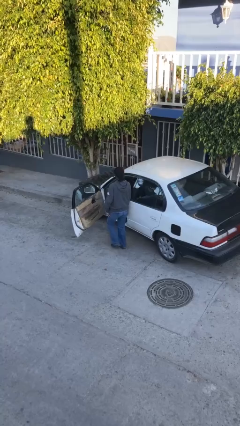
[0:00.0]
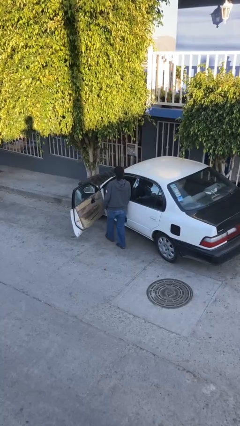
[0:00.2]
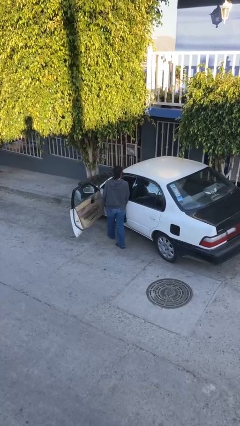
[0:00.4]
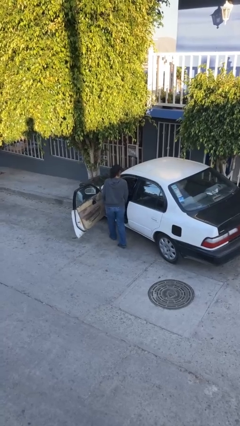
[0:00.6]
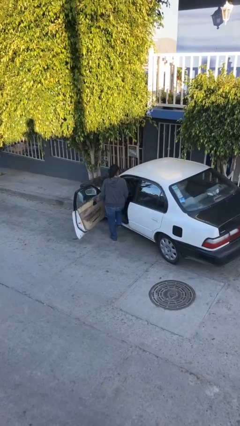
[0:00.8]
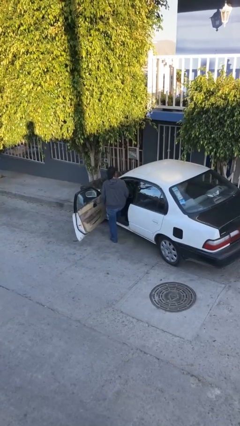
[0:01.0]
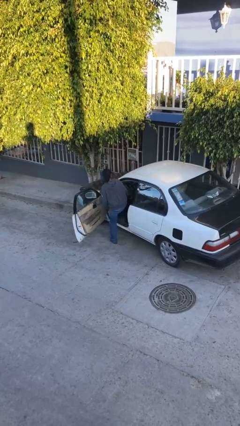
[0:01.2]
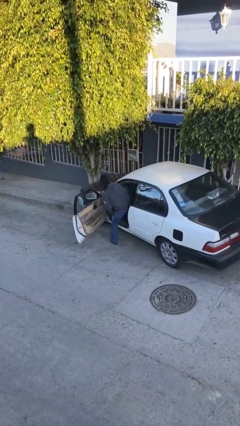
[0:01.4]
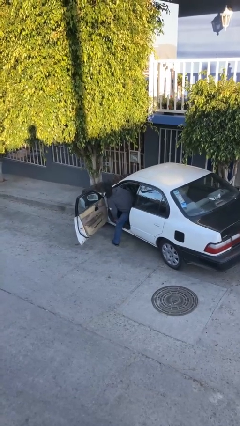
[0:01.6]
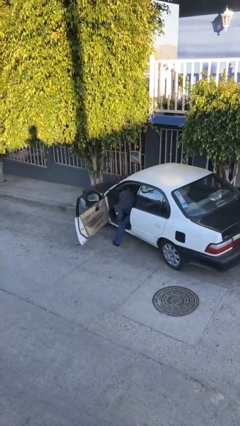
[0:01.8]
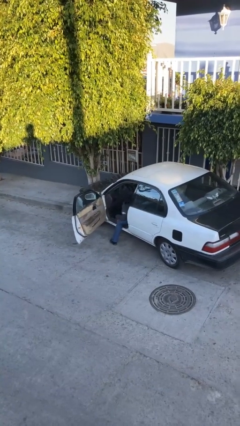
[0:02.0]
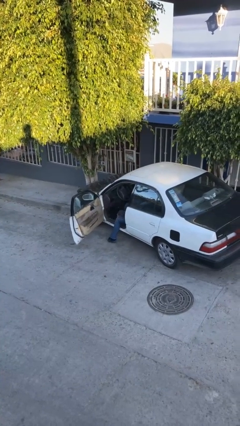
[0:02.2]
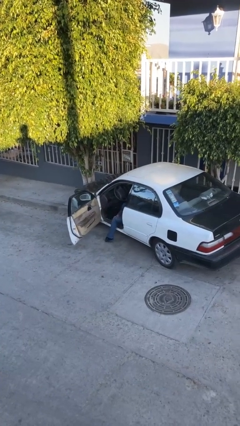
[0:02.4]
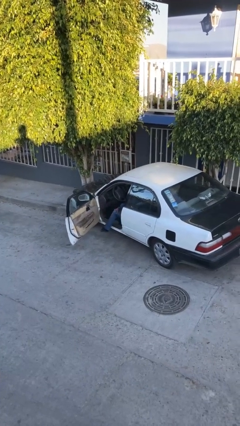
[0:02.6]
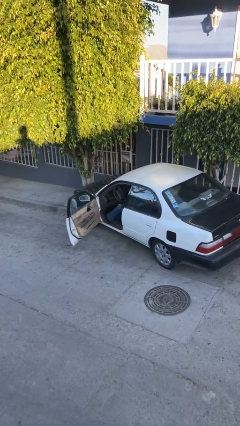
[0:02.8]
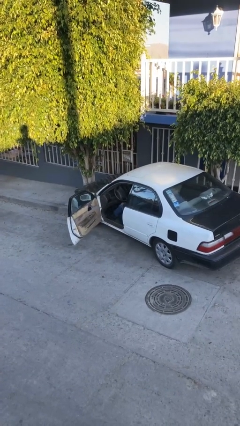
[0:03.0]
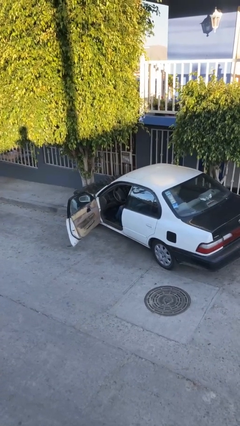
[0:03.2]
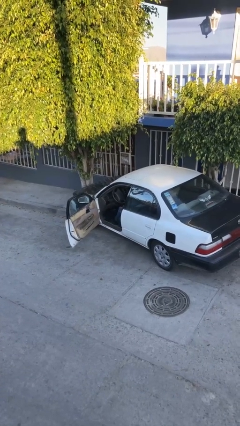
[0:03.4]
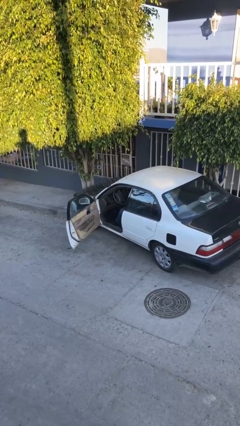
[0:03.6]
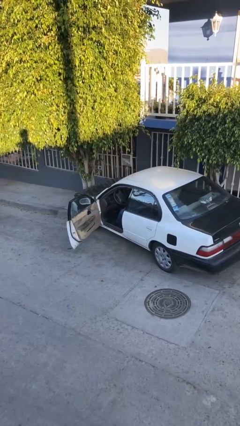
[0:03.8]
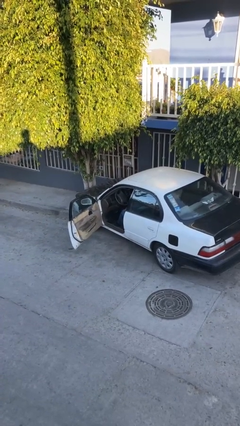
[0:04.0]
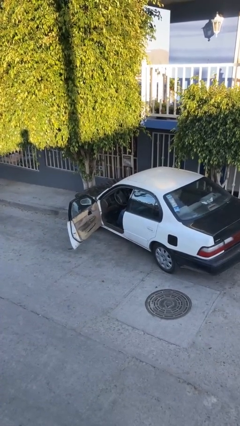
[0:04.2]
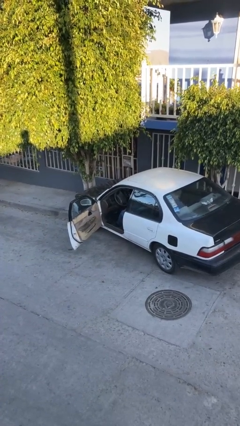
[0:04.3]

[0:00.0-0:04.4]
person enters car

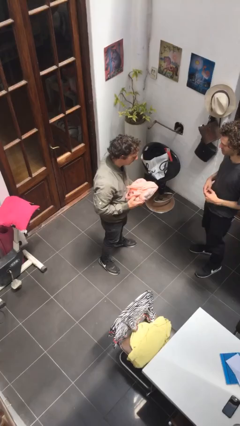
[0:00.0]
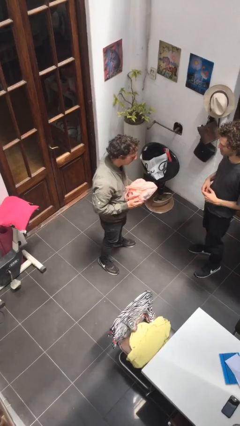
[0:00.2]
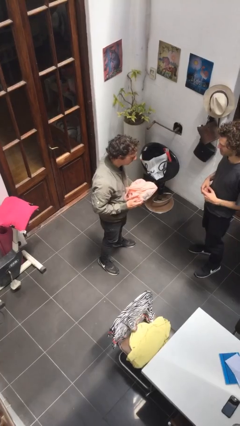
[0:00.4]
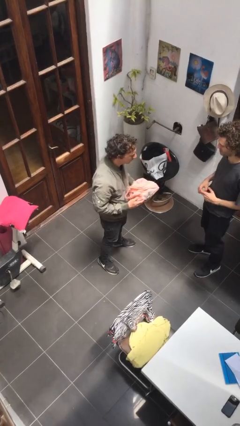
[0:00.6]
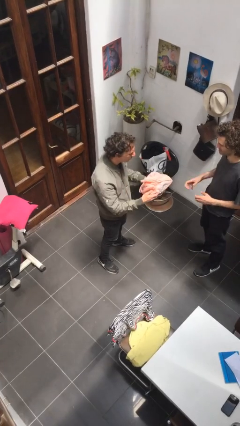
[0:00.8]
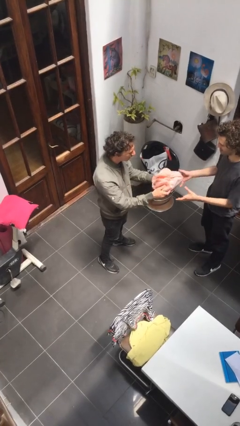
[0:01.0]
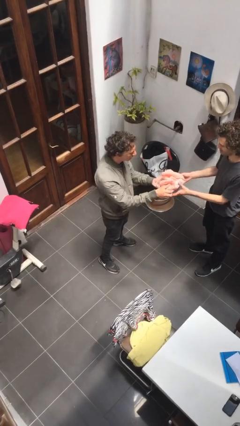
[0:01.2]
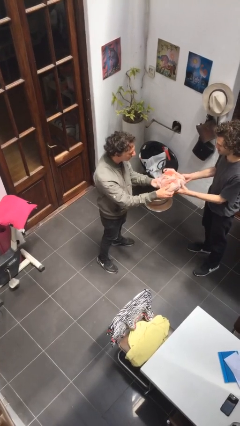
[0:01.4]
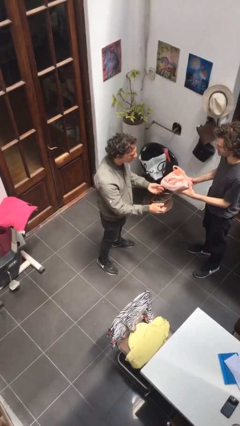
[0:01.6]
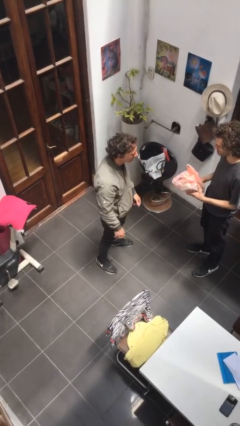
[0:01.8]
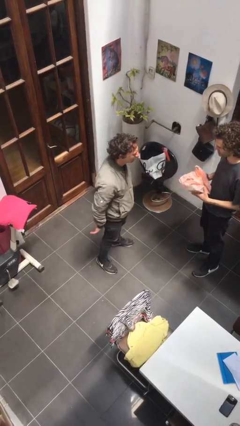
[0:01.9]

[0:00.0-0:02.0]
person transfers object to person

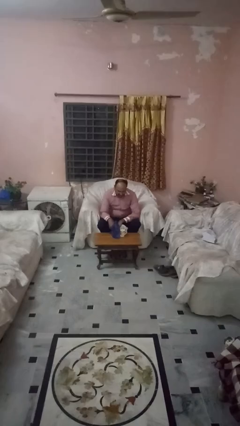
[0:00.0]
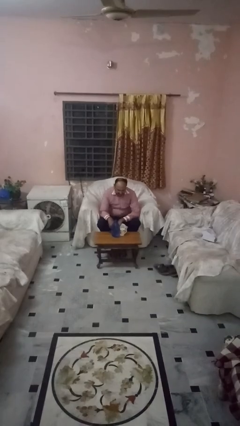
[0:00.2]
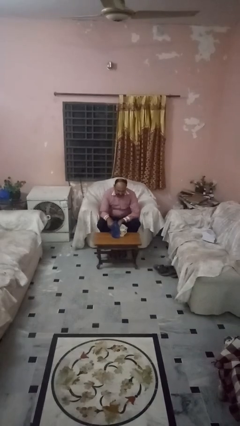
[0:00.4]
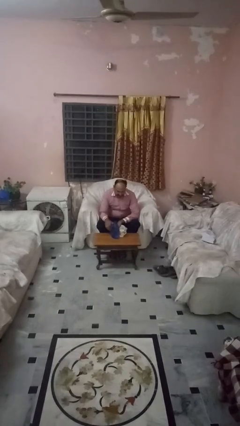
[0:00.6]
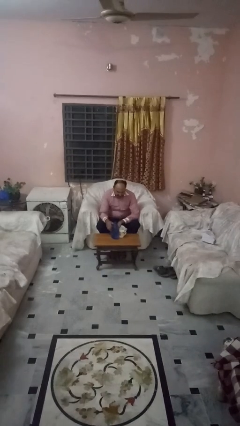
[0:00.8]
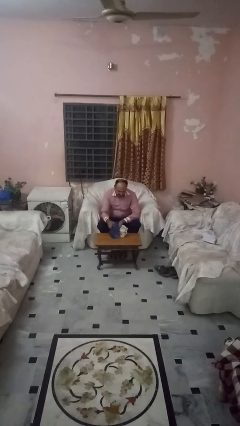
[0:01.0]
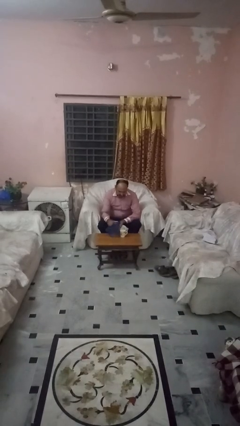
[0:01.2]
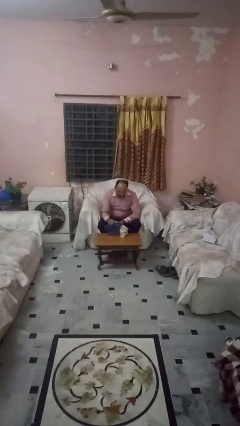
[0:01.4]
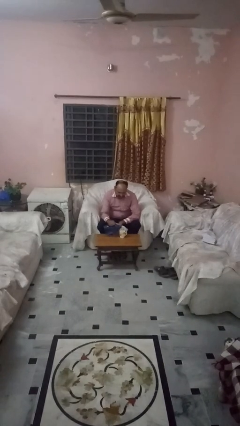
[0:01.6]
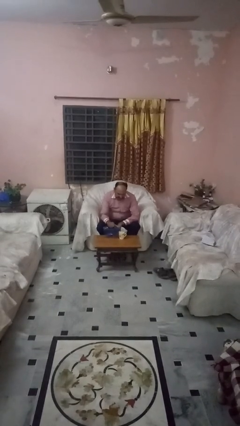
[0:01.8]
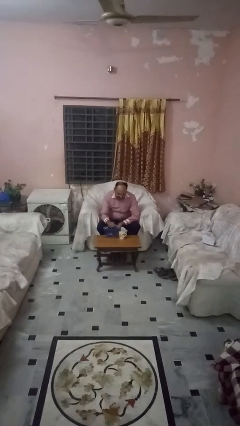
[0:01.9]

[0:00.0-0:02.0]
person pours liquid into cup

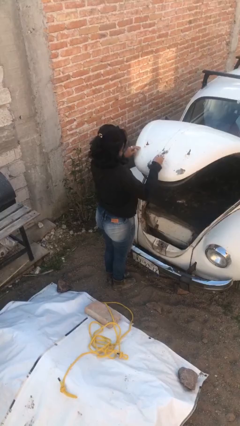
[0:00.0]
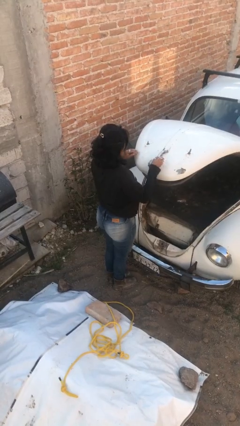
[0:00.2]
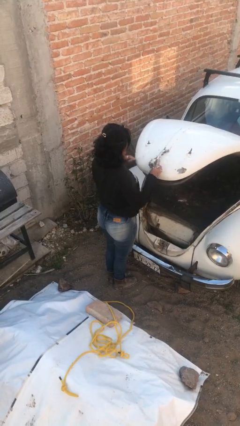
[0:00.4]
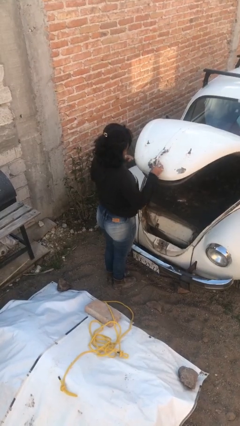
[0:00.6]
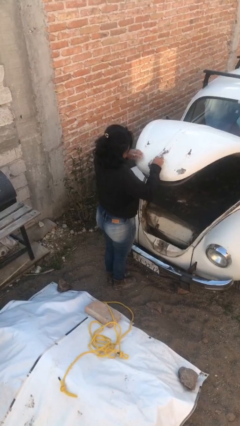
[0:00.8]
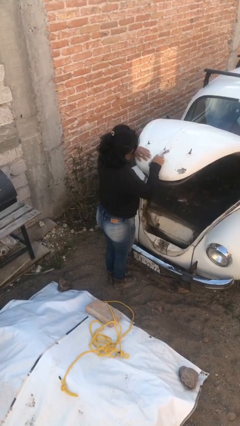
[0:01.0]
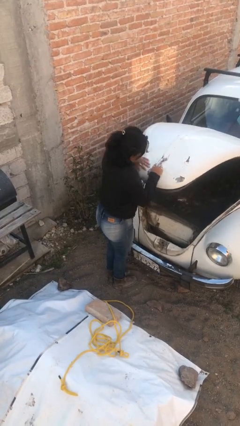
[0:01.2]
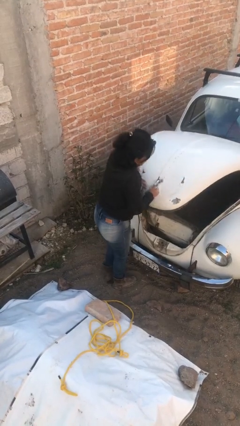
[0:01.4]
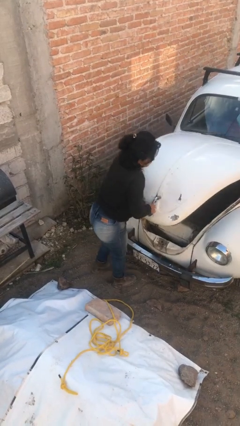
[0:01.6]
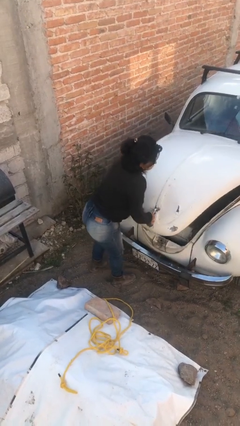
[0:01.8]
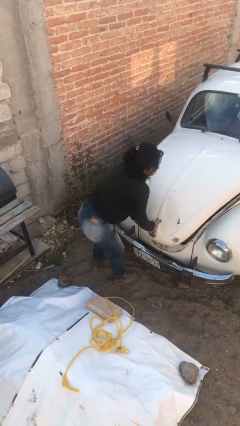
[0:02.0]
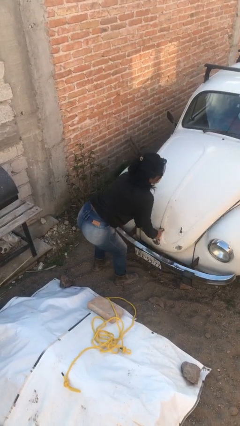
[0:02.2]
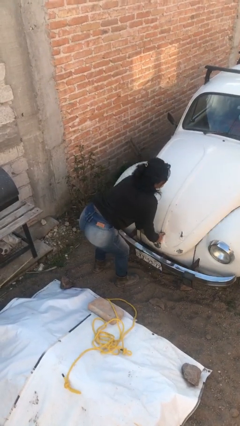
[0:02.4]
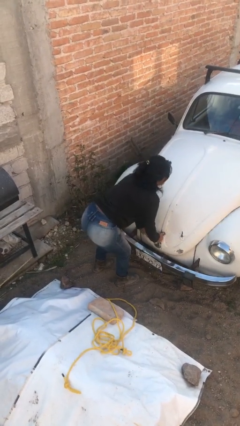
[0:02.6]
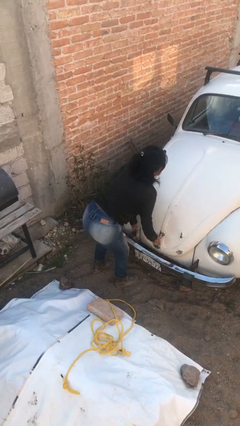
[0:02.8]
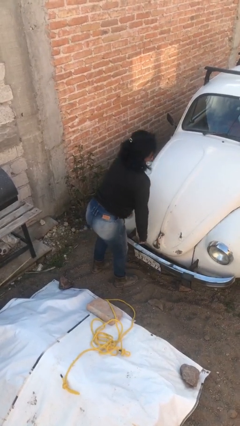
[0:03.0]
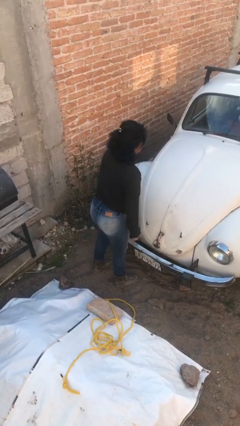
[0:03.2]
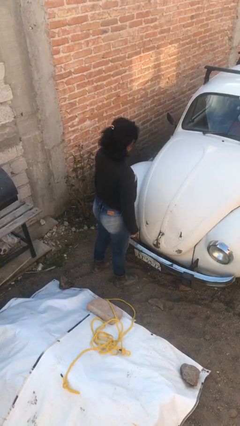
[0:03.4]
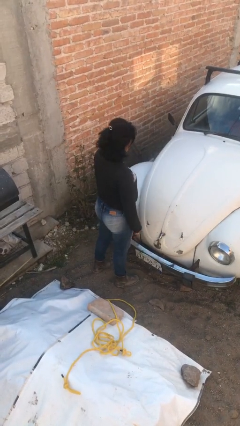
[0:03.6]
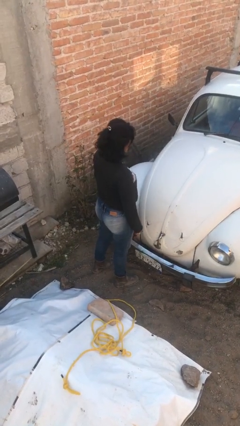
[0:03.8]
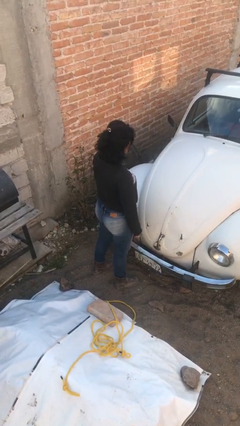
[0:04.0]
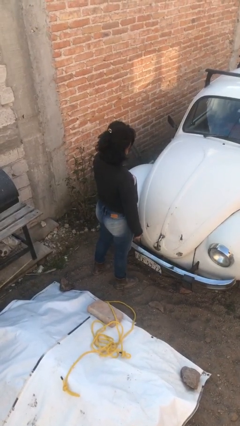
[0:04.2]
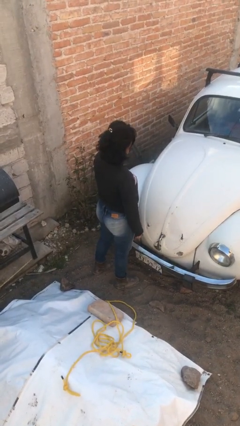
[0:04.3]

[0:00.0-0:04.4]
person closes car trunk

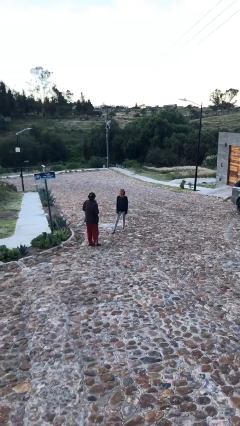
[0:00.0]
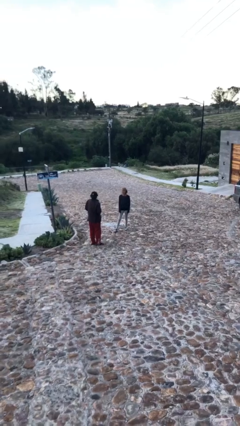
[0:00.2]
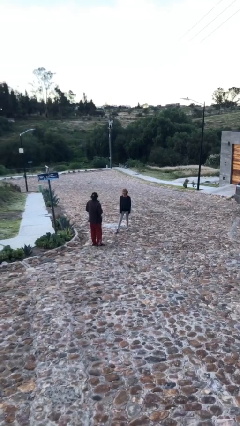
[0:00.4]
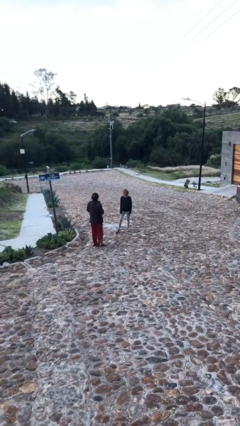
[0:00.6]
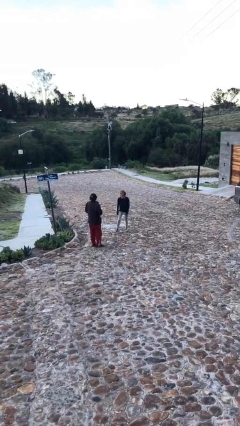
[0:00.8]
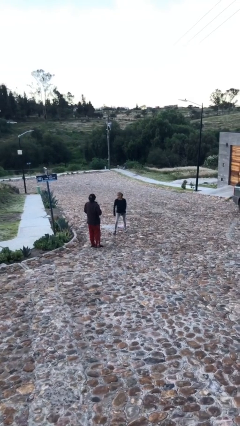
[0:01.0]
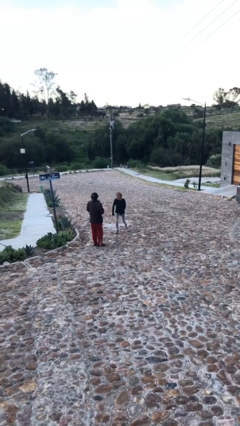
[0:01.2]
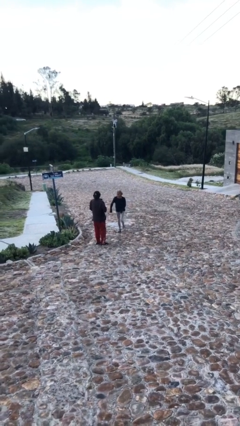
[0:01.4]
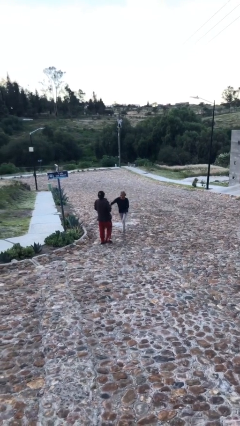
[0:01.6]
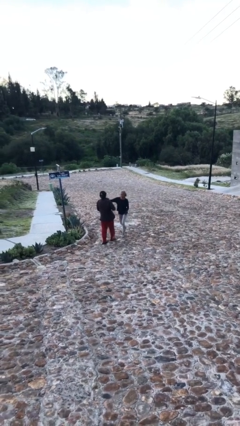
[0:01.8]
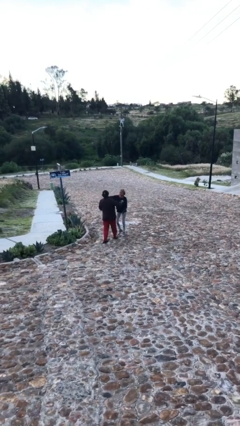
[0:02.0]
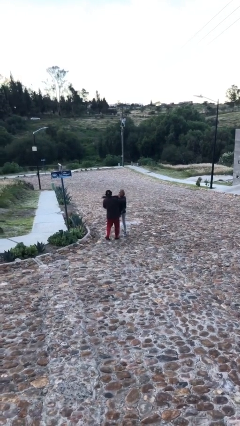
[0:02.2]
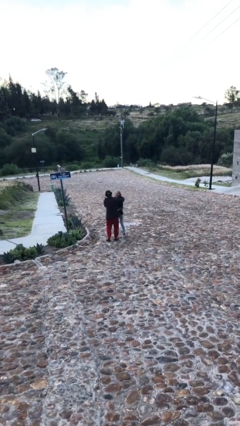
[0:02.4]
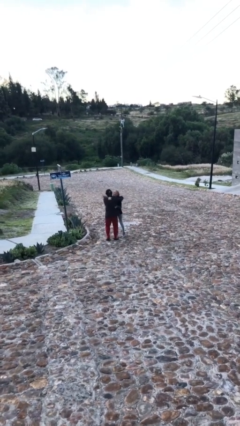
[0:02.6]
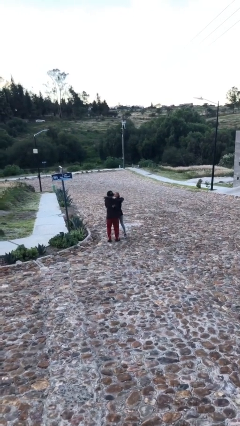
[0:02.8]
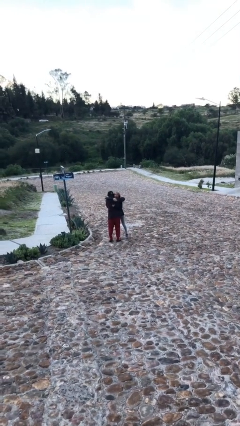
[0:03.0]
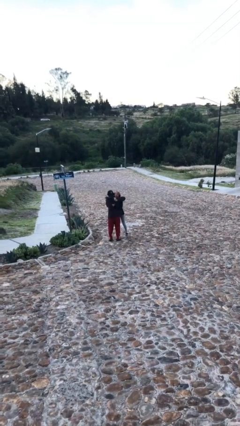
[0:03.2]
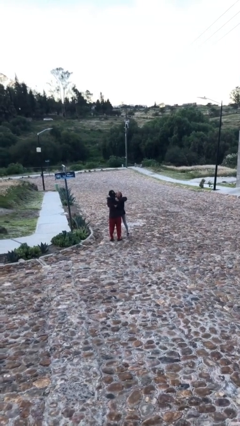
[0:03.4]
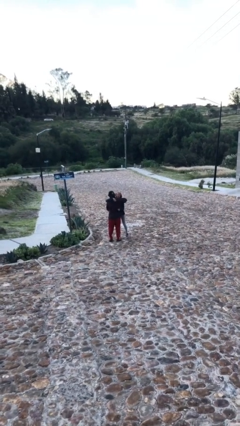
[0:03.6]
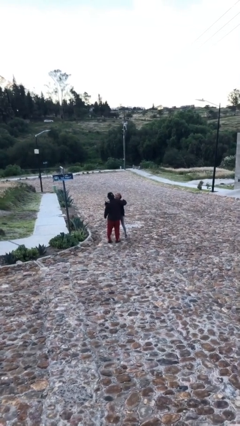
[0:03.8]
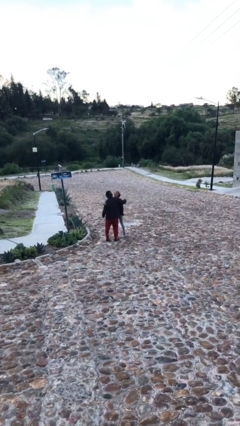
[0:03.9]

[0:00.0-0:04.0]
person embraces person

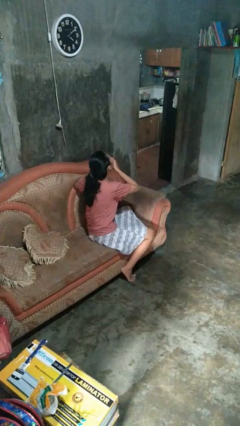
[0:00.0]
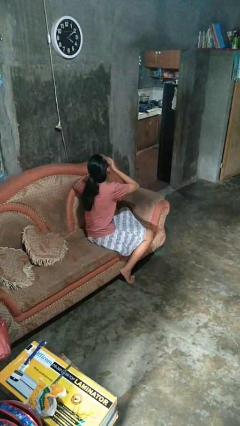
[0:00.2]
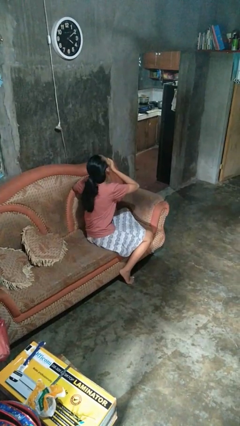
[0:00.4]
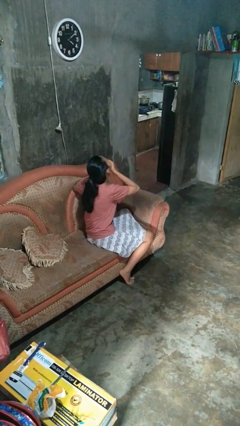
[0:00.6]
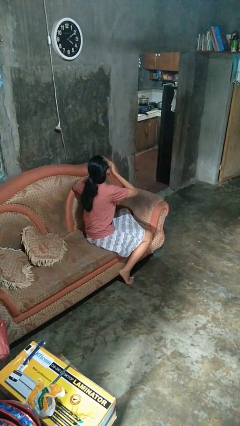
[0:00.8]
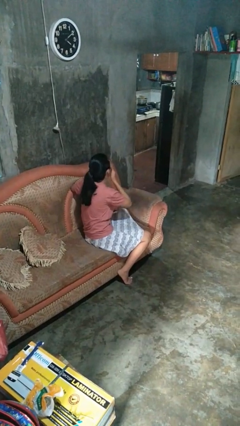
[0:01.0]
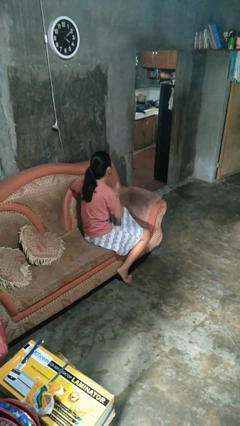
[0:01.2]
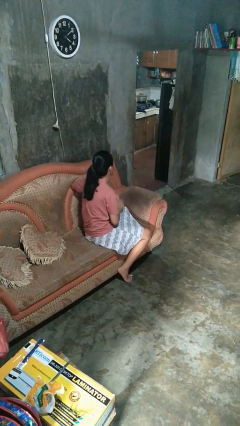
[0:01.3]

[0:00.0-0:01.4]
person yawns
